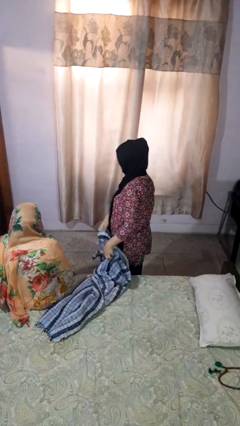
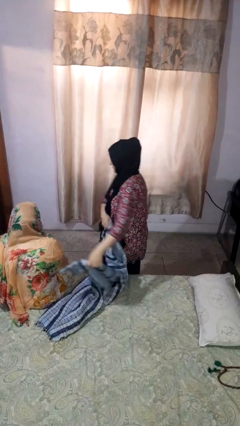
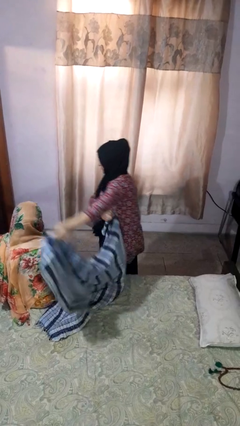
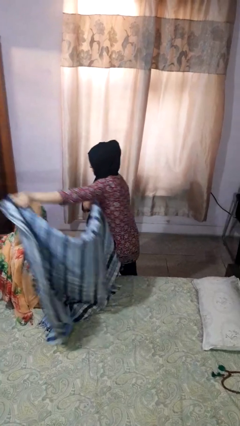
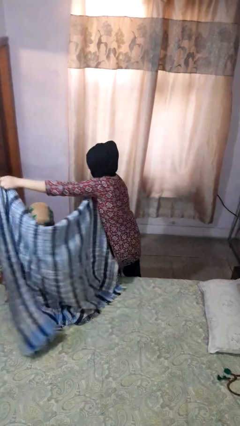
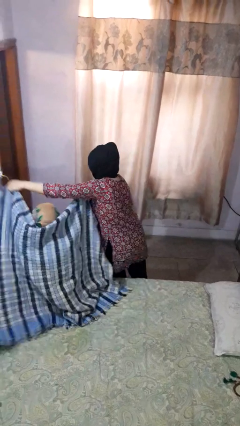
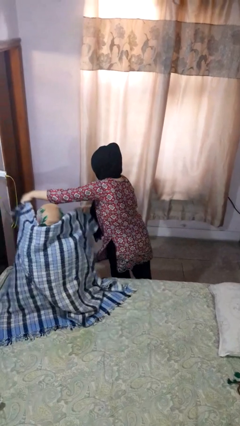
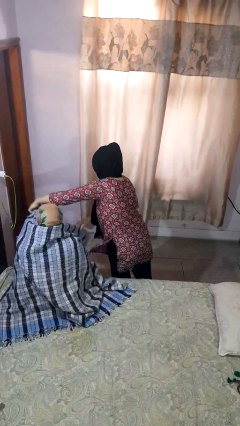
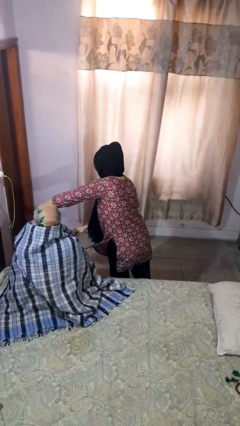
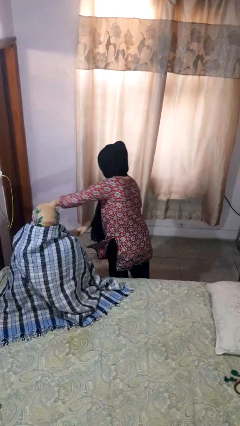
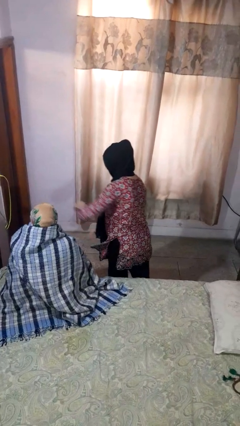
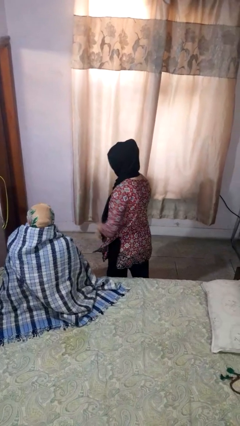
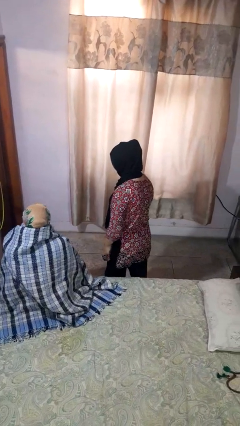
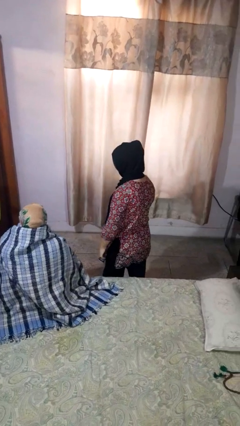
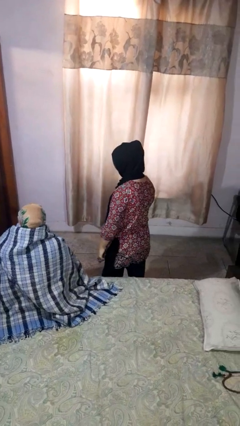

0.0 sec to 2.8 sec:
person covers friend with blanket

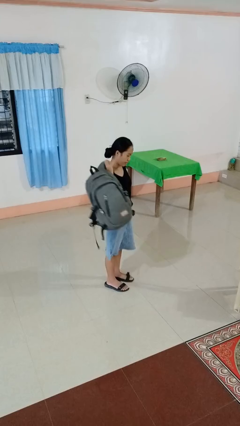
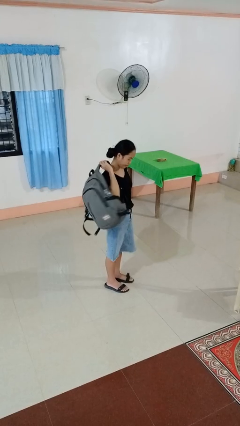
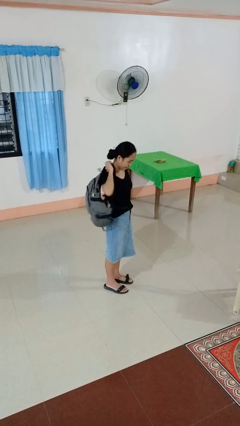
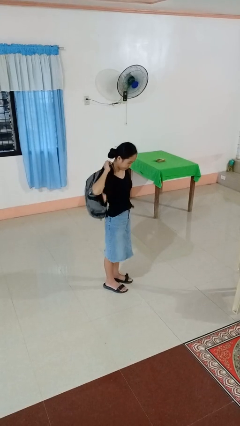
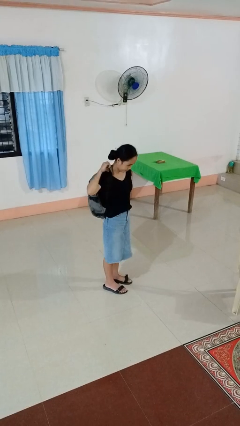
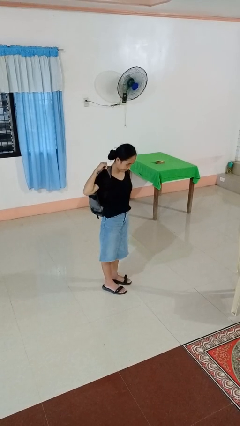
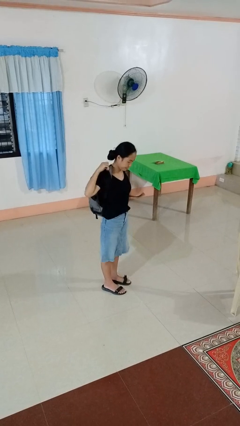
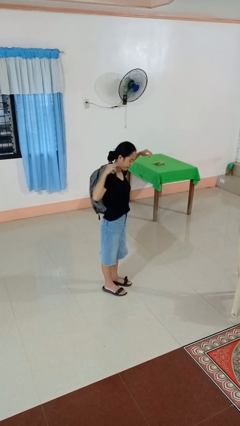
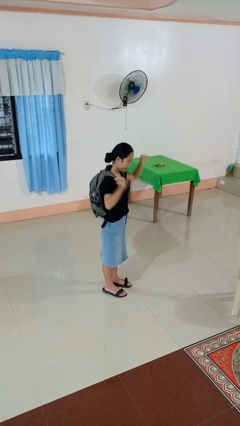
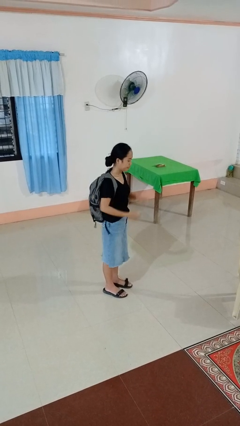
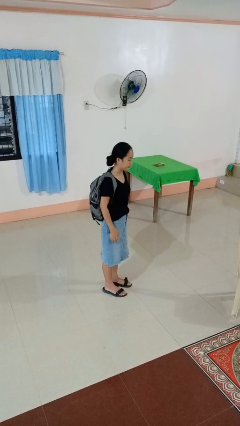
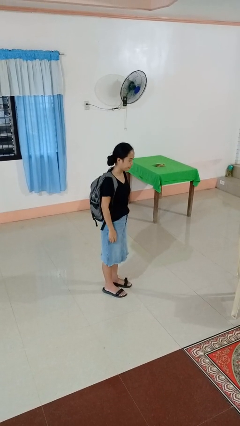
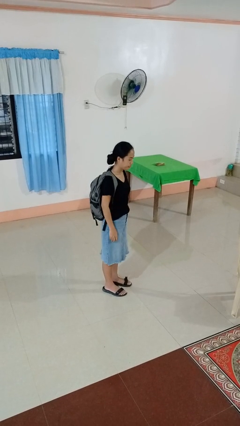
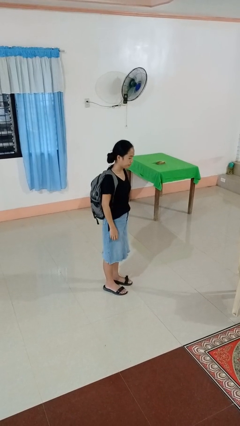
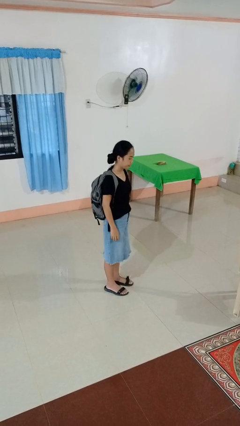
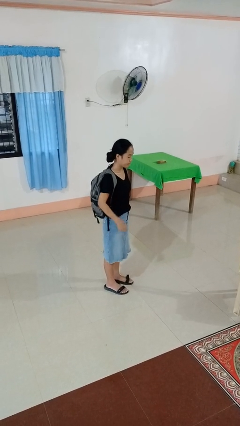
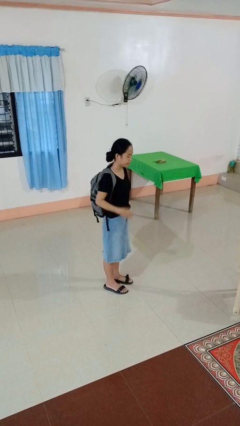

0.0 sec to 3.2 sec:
person puts on backpack

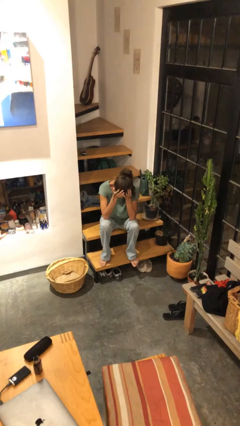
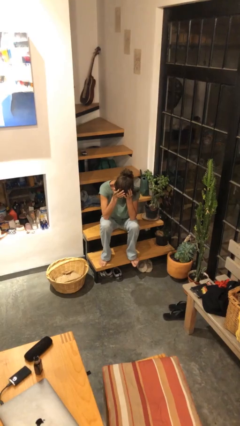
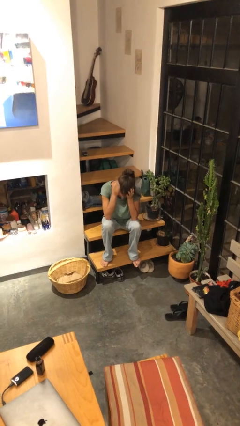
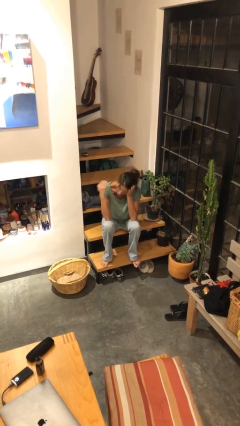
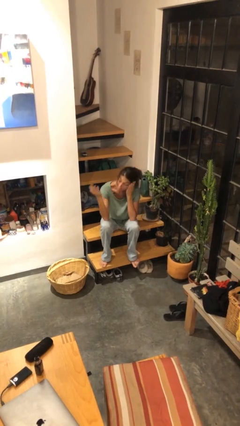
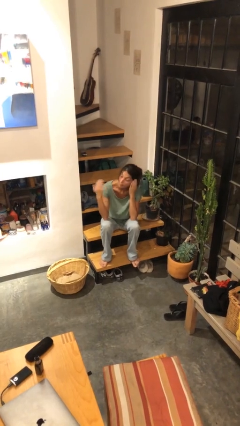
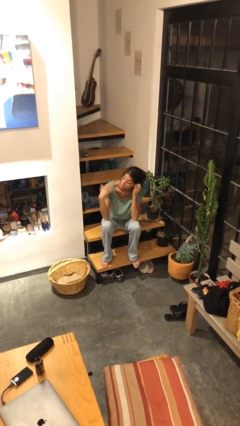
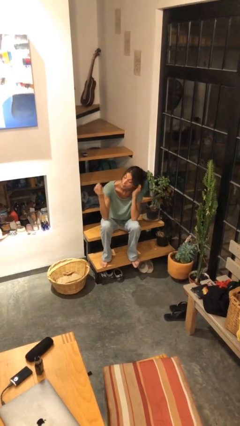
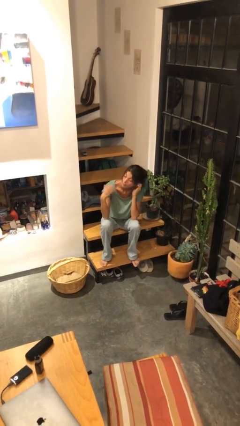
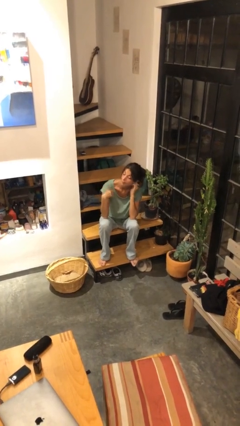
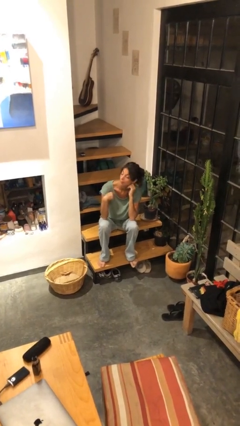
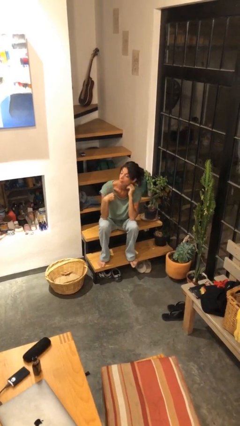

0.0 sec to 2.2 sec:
person gestures come here

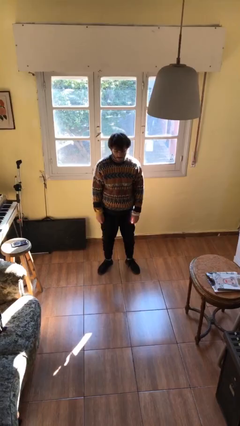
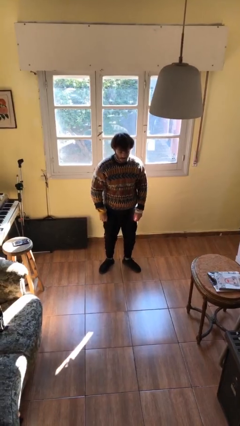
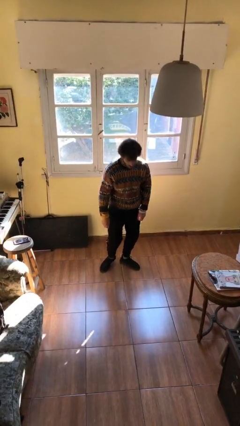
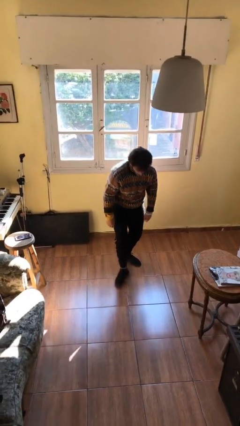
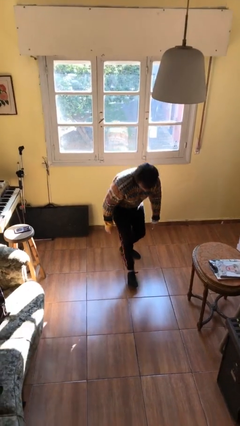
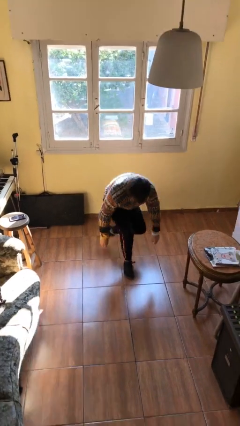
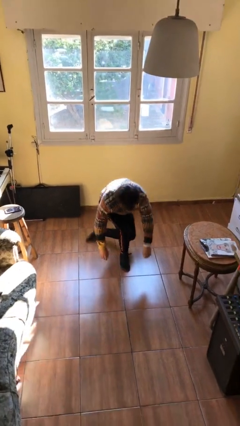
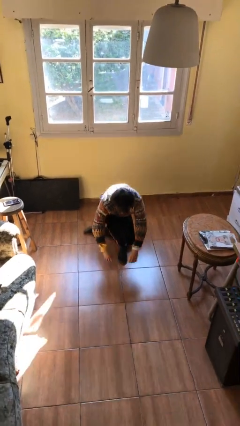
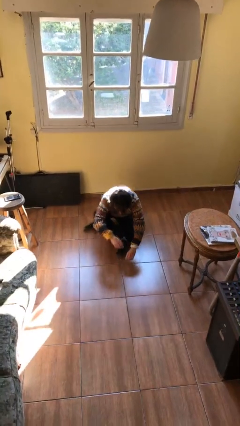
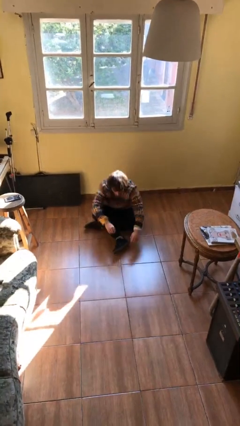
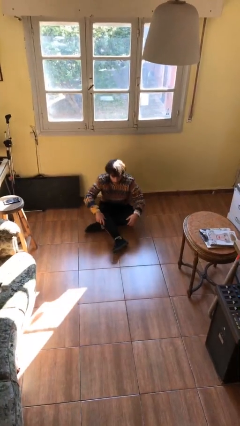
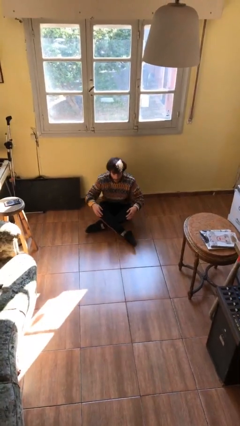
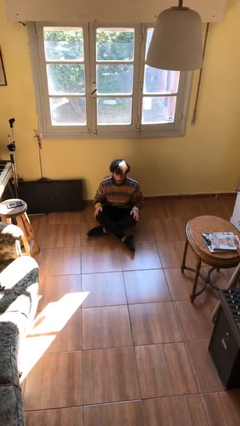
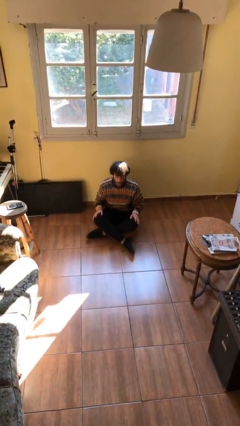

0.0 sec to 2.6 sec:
person sits crisscross

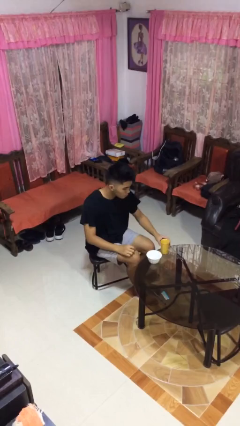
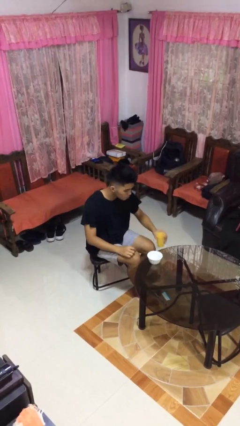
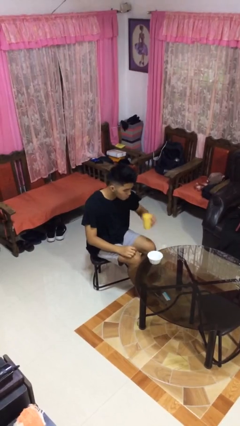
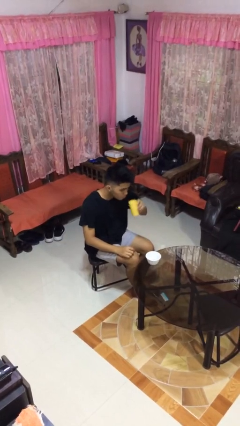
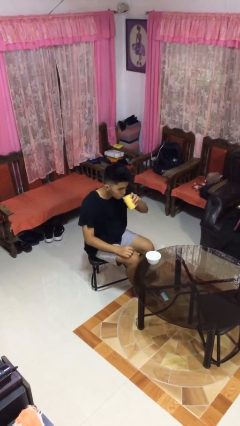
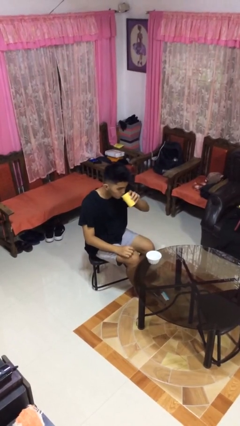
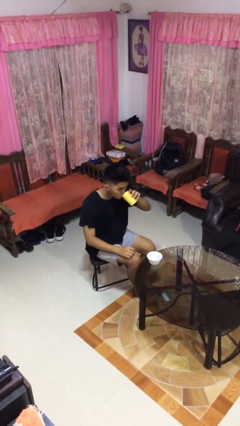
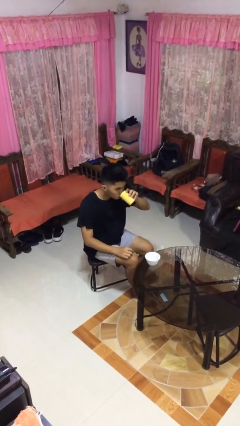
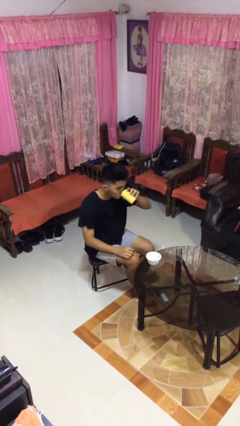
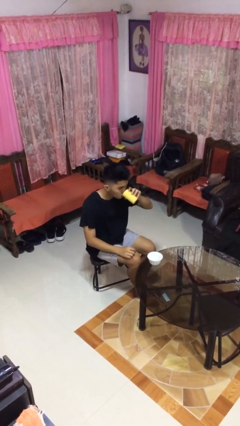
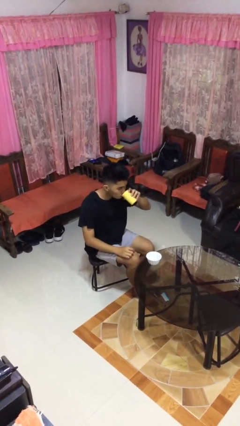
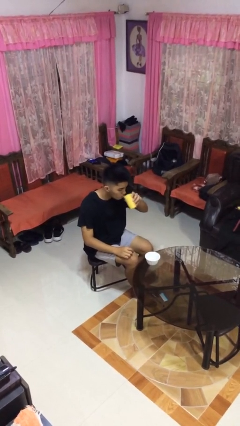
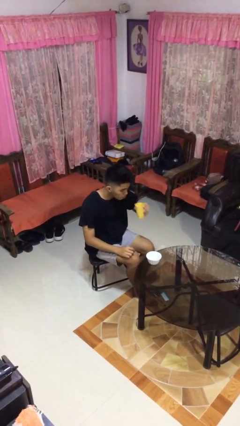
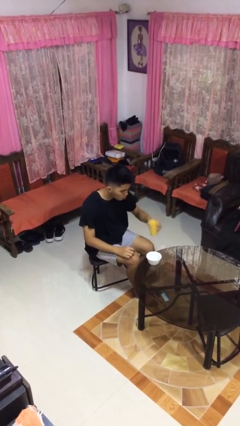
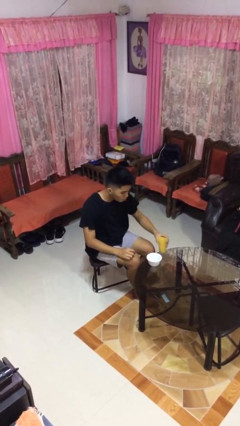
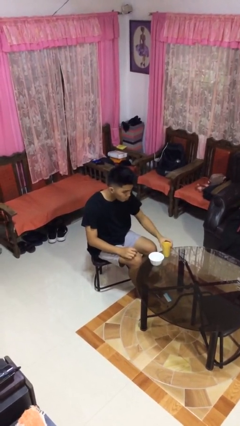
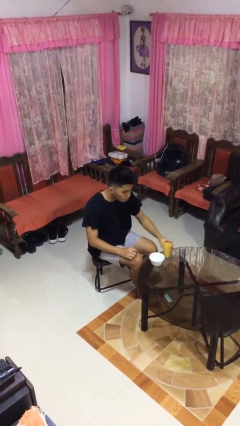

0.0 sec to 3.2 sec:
person drinks from cup

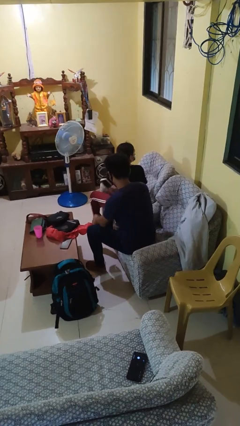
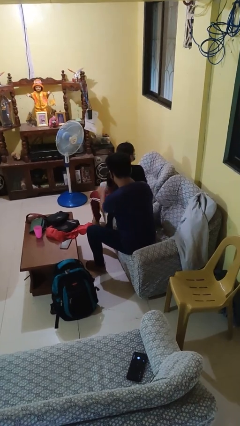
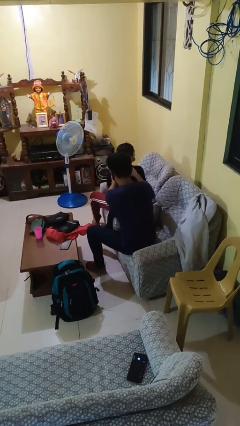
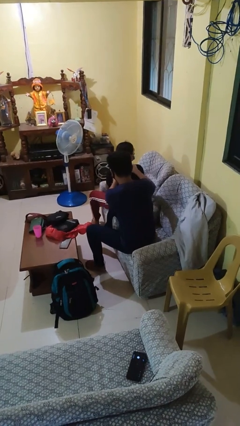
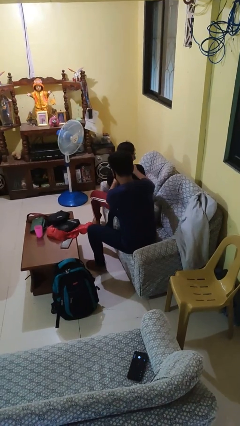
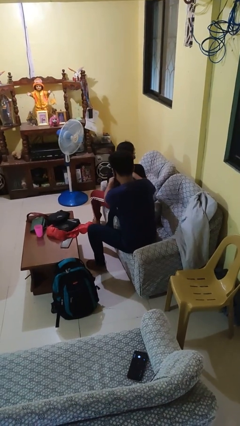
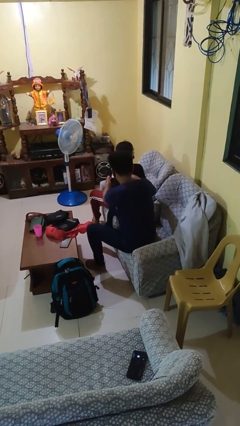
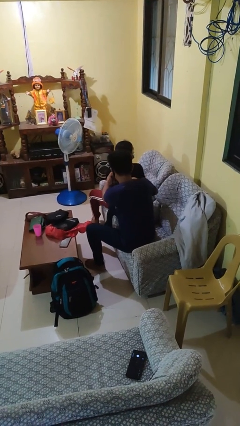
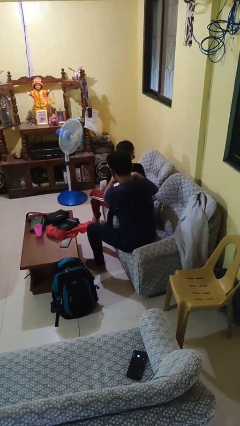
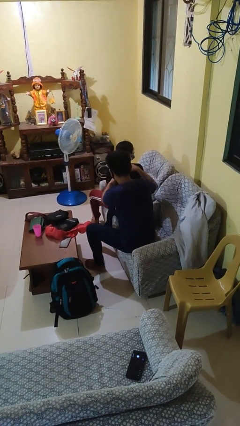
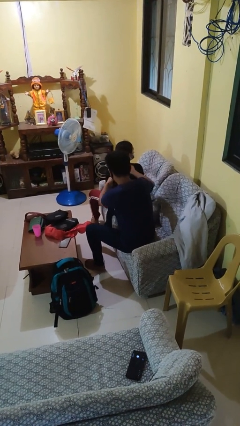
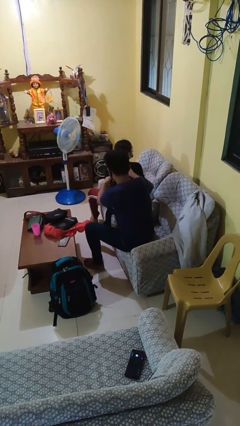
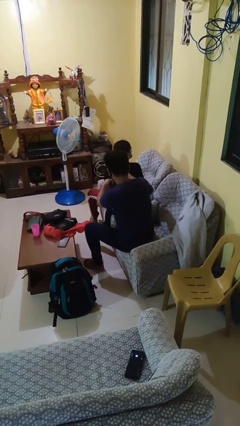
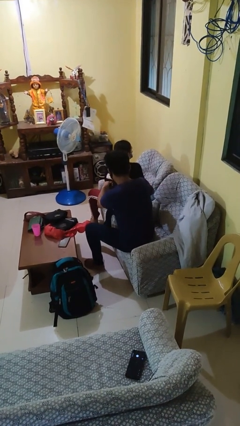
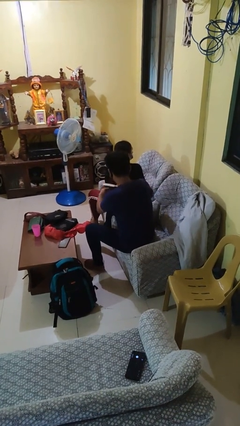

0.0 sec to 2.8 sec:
person brushes hair of person
